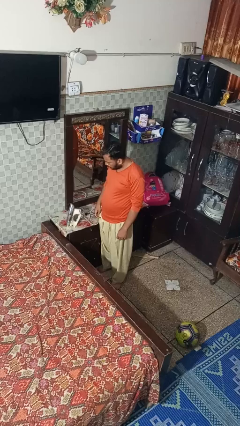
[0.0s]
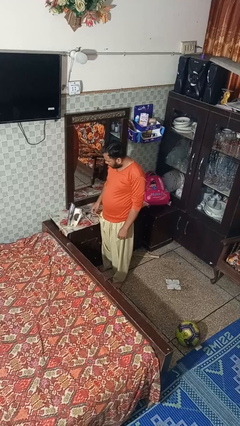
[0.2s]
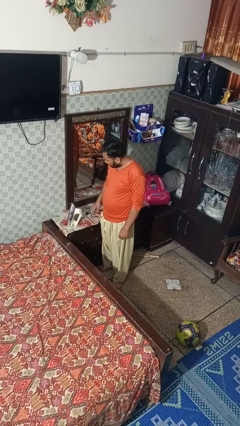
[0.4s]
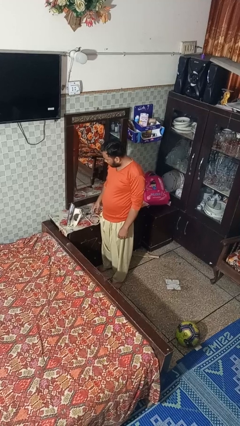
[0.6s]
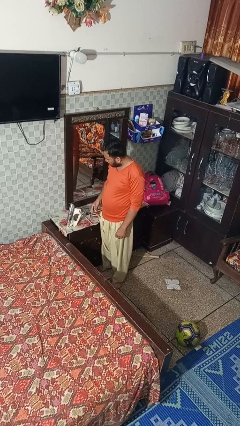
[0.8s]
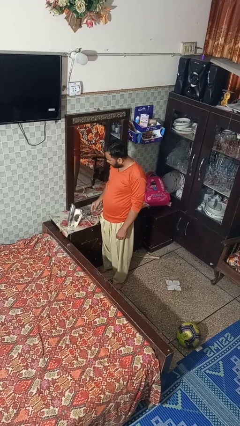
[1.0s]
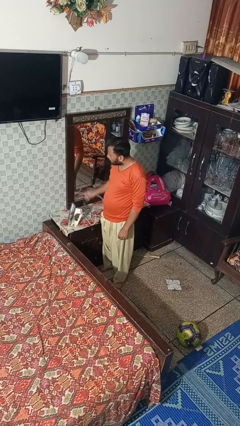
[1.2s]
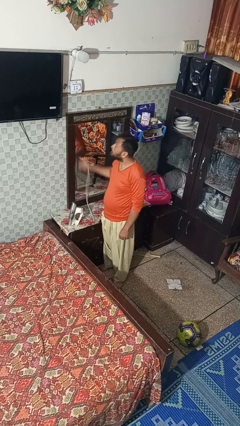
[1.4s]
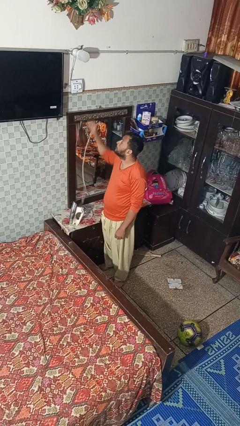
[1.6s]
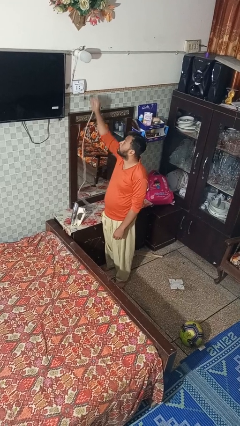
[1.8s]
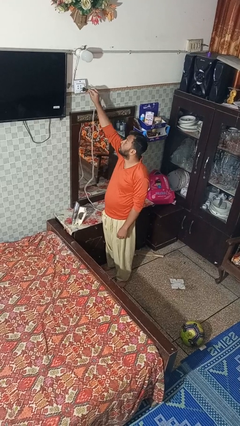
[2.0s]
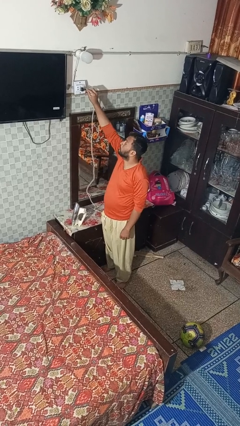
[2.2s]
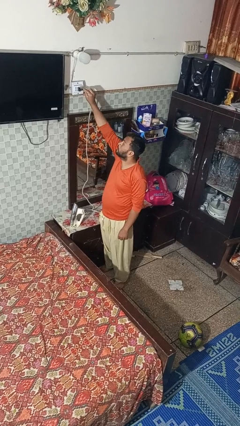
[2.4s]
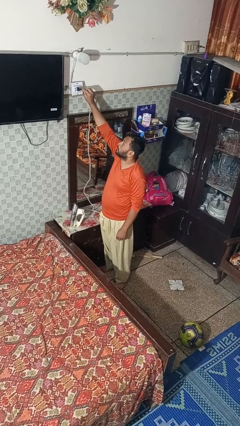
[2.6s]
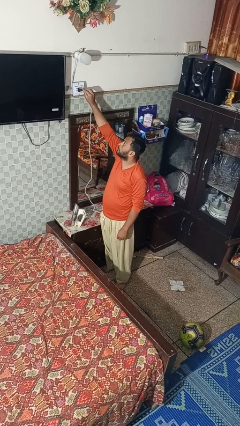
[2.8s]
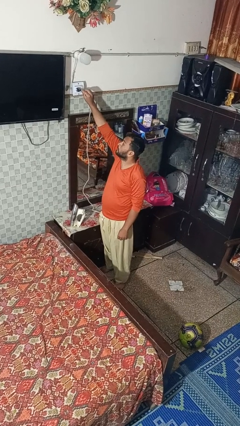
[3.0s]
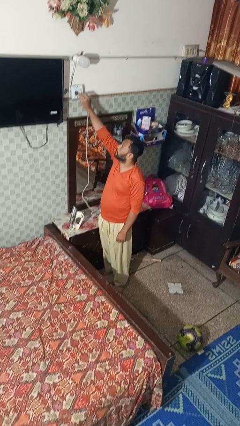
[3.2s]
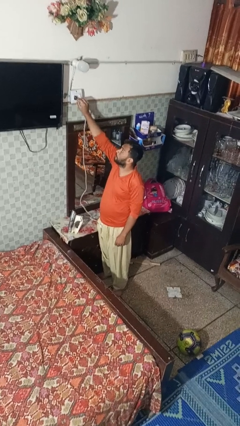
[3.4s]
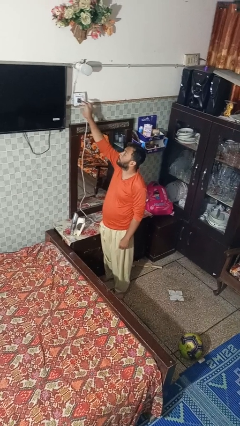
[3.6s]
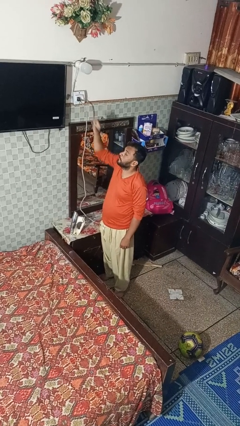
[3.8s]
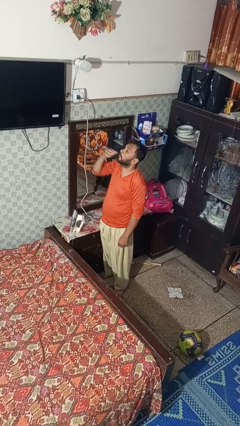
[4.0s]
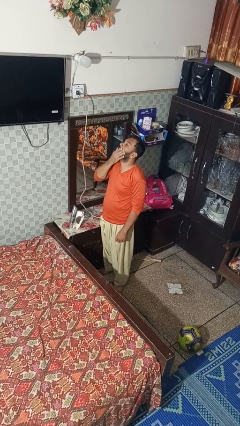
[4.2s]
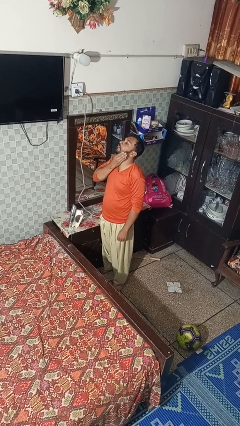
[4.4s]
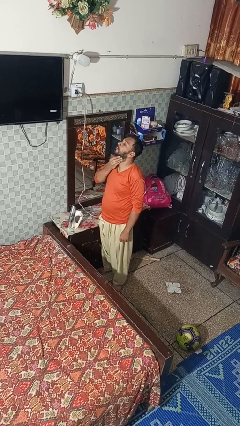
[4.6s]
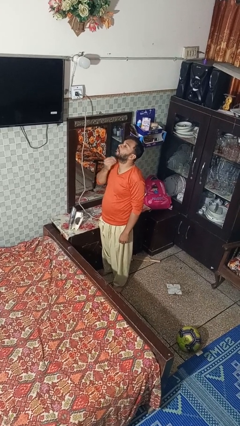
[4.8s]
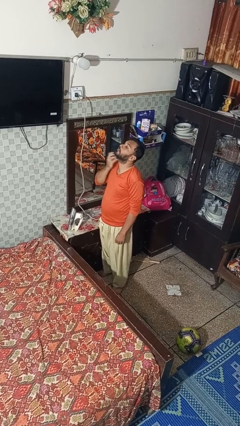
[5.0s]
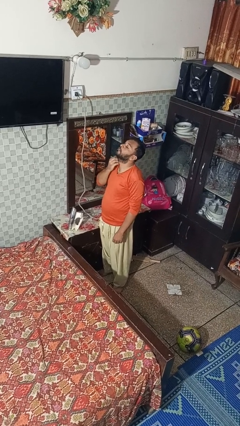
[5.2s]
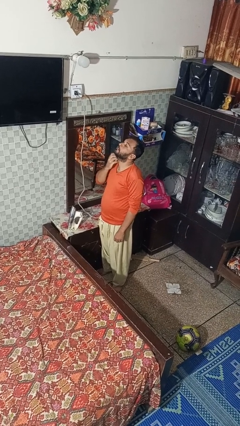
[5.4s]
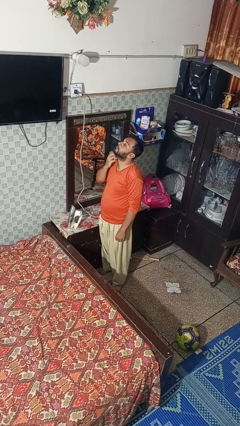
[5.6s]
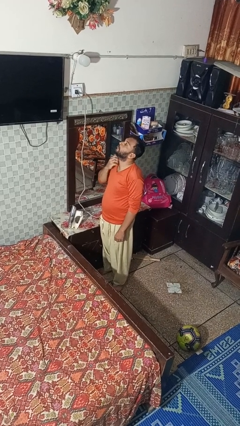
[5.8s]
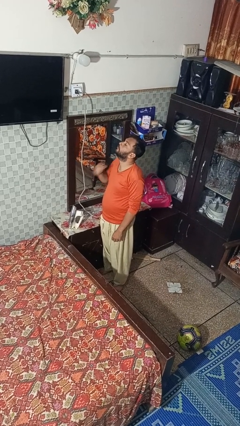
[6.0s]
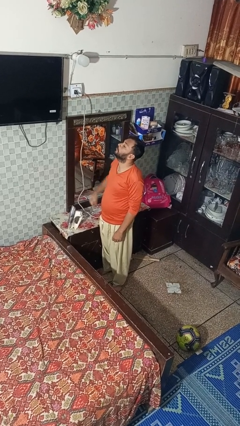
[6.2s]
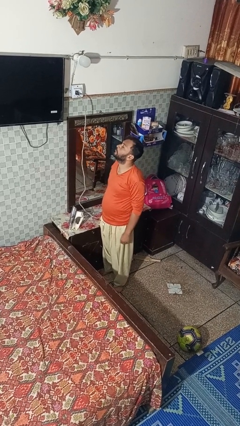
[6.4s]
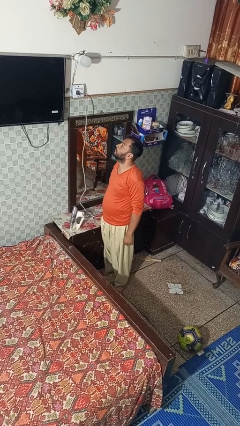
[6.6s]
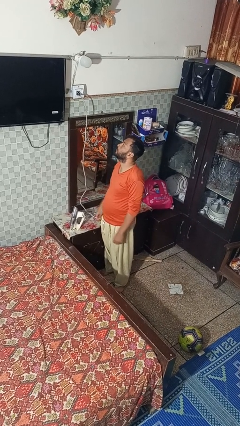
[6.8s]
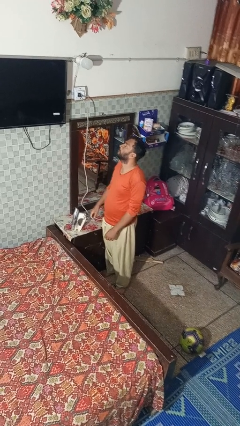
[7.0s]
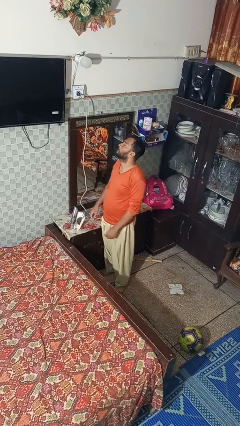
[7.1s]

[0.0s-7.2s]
person plugs into electrical socket

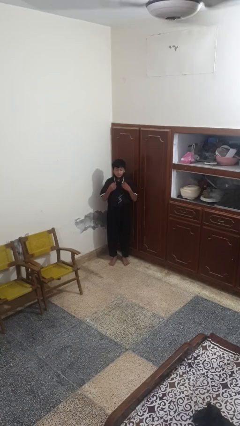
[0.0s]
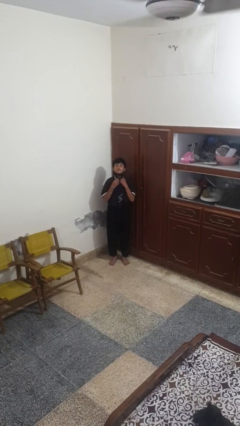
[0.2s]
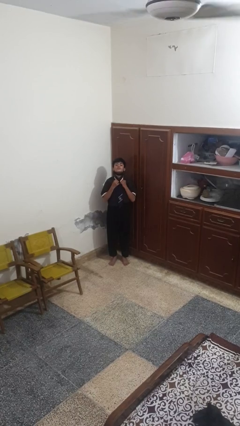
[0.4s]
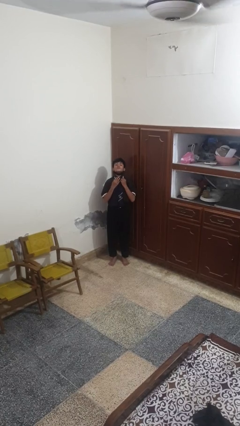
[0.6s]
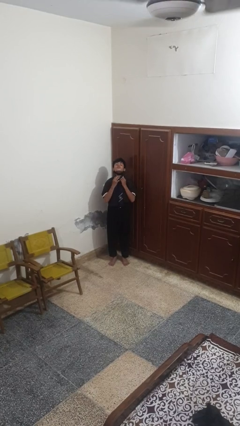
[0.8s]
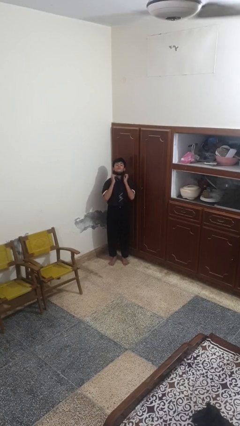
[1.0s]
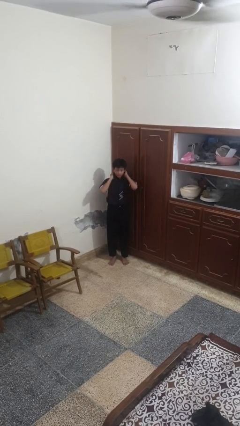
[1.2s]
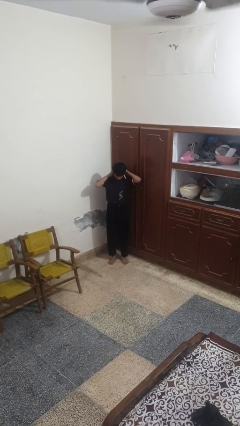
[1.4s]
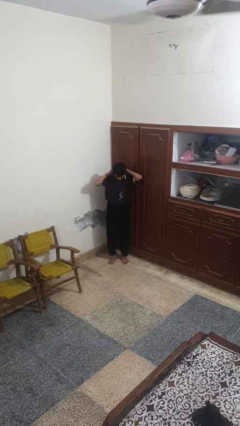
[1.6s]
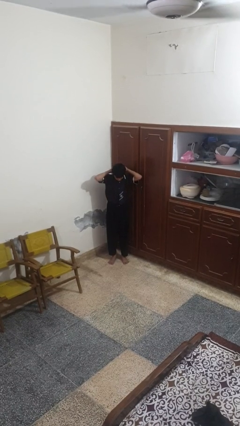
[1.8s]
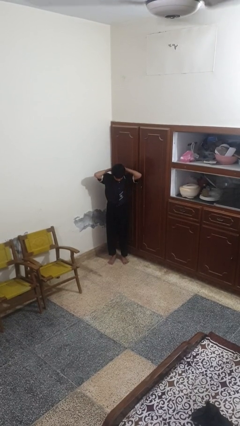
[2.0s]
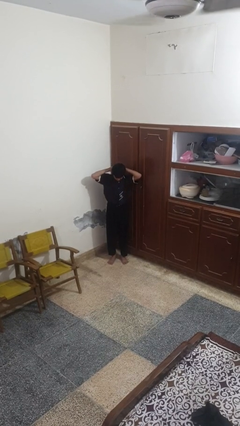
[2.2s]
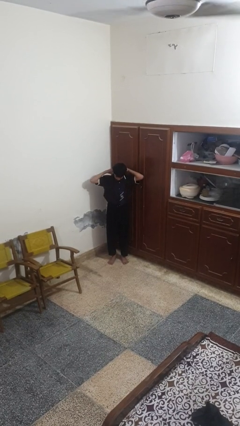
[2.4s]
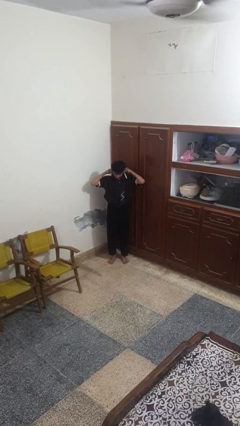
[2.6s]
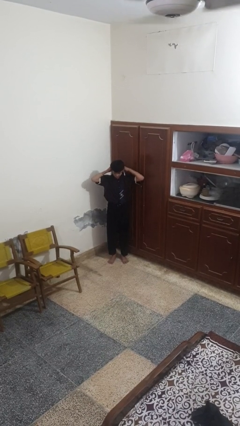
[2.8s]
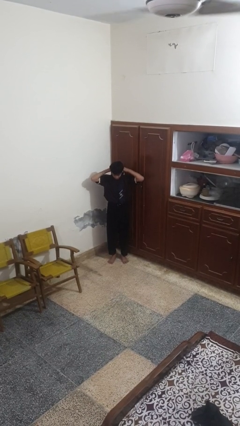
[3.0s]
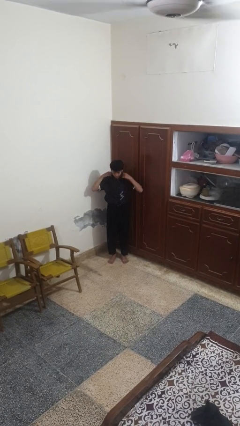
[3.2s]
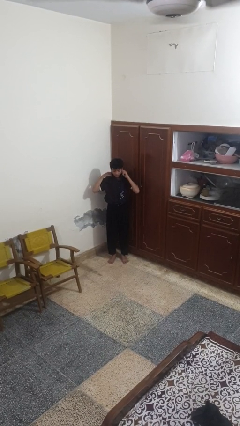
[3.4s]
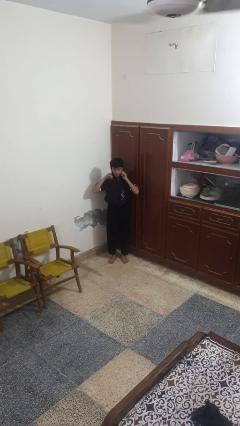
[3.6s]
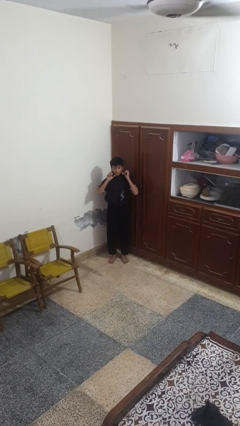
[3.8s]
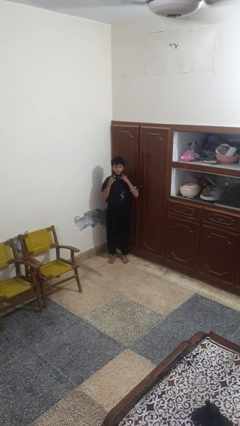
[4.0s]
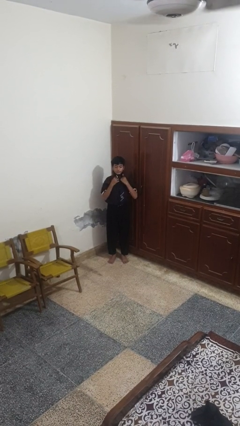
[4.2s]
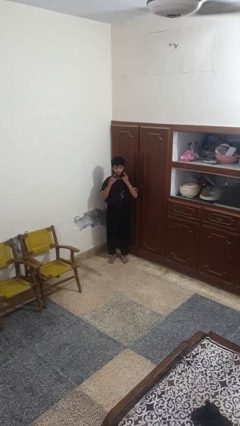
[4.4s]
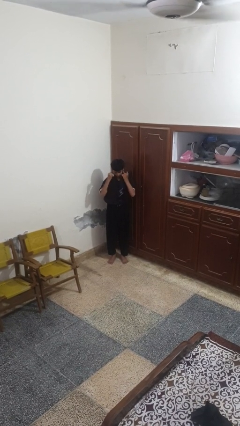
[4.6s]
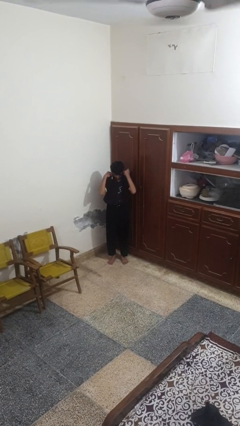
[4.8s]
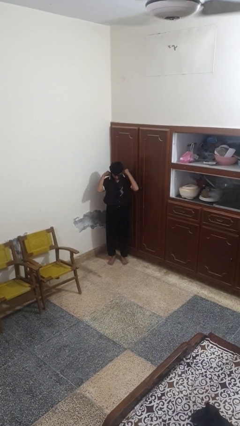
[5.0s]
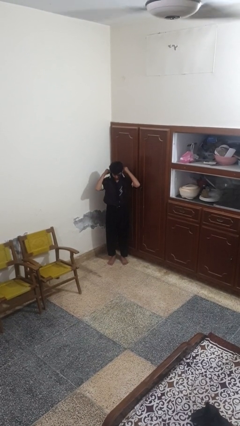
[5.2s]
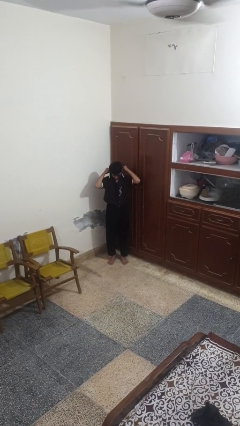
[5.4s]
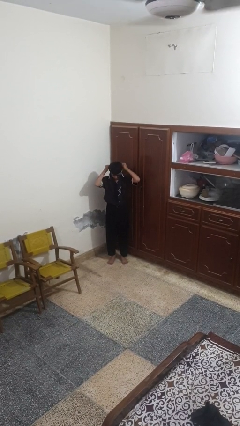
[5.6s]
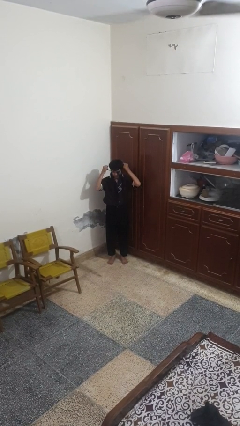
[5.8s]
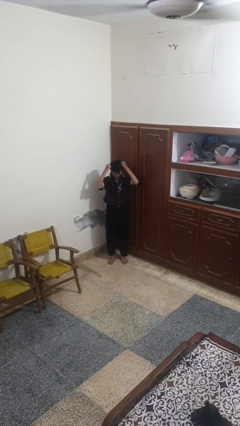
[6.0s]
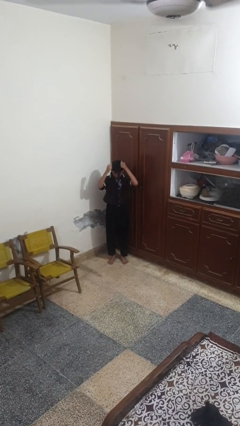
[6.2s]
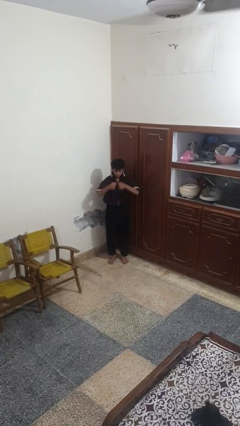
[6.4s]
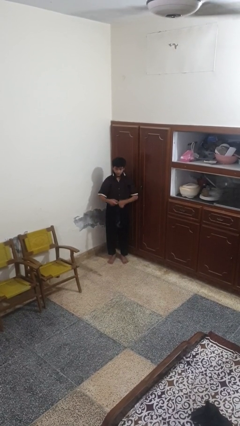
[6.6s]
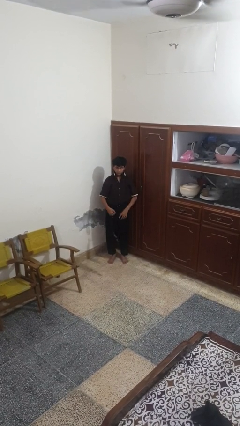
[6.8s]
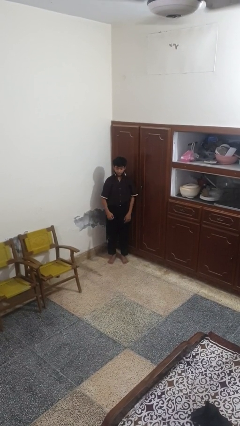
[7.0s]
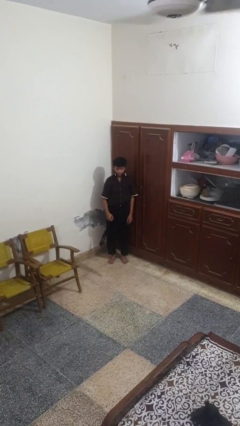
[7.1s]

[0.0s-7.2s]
person takes off necktie

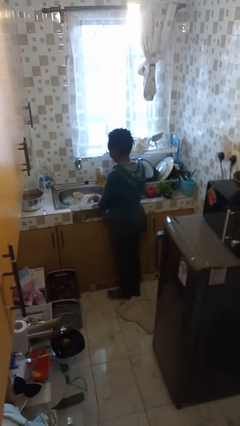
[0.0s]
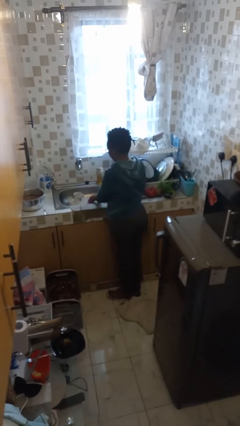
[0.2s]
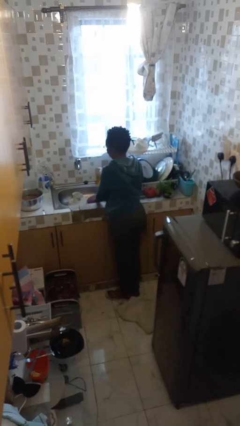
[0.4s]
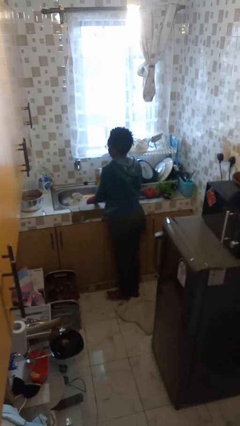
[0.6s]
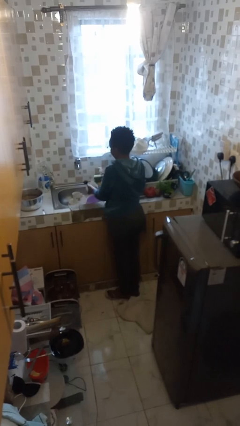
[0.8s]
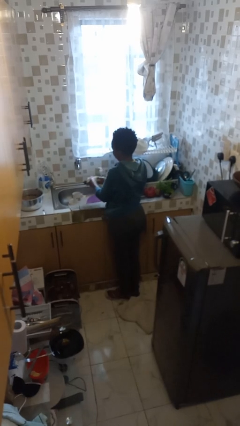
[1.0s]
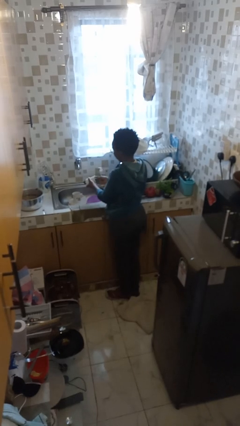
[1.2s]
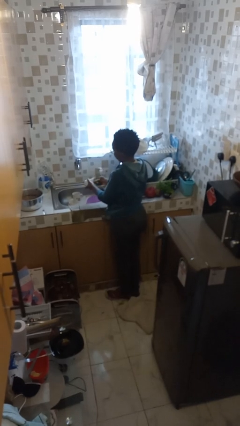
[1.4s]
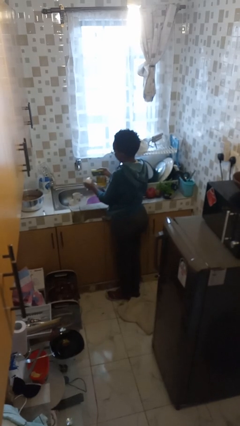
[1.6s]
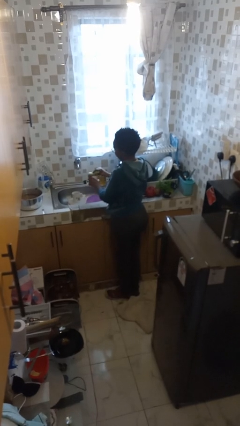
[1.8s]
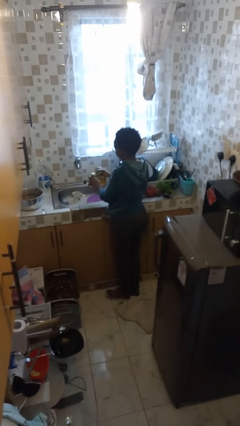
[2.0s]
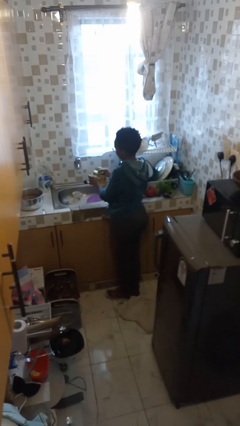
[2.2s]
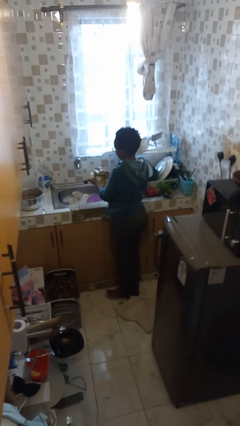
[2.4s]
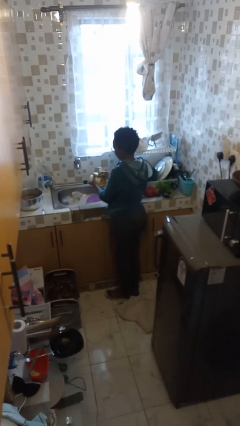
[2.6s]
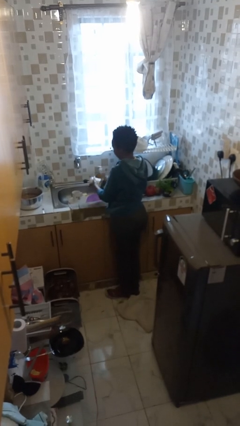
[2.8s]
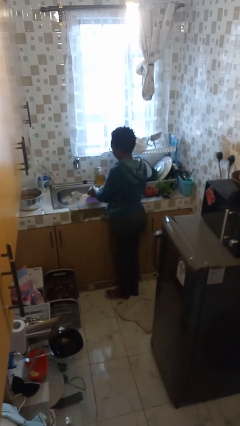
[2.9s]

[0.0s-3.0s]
person washes dish
